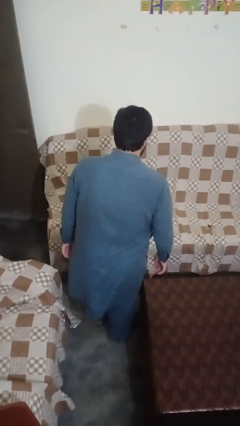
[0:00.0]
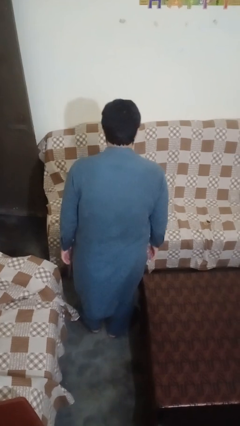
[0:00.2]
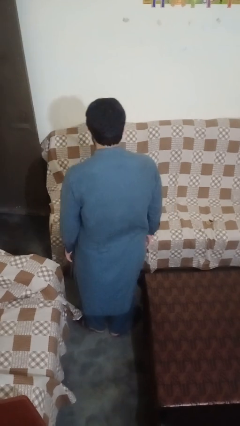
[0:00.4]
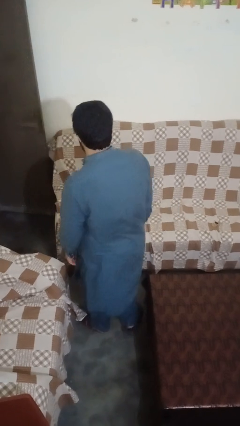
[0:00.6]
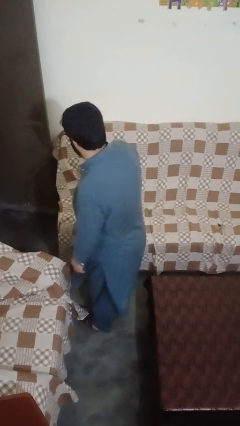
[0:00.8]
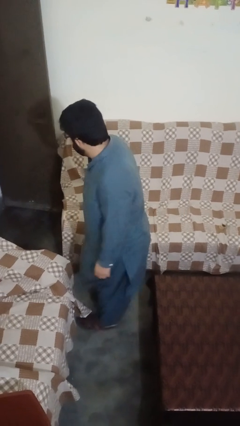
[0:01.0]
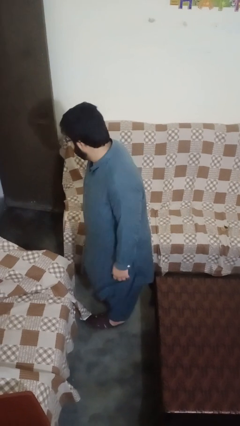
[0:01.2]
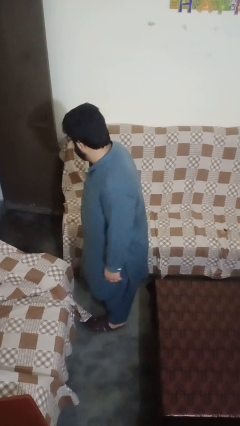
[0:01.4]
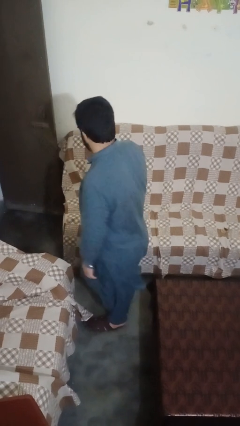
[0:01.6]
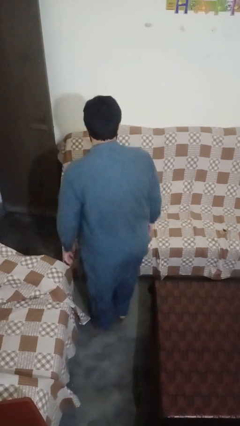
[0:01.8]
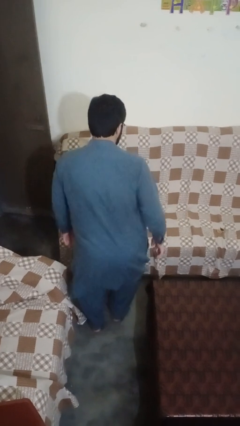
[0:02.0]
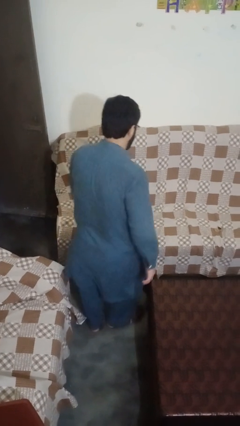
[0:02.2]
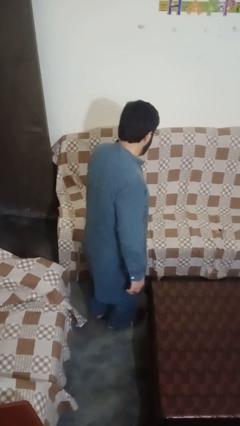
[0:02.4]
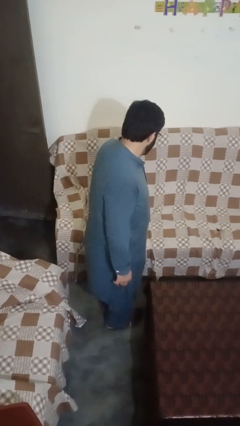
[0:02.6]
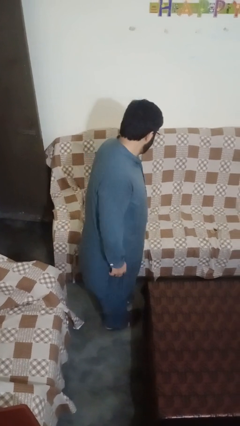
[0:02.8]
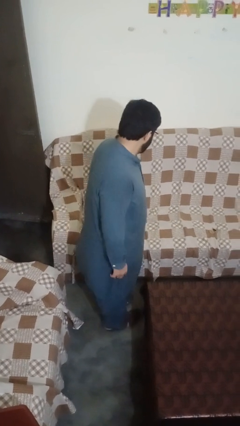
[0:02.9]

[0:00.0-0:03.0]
person twirls

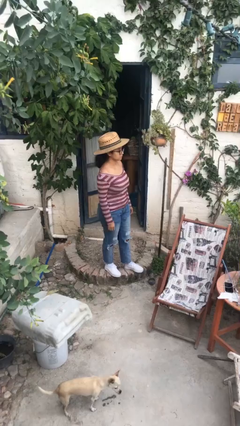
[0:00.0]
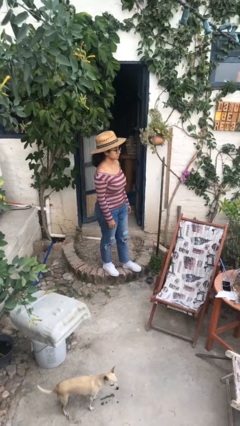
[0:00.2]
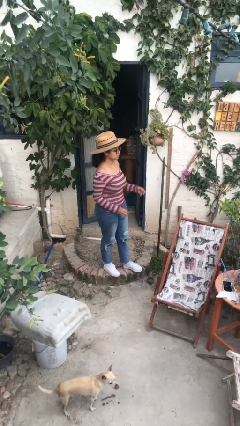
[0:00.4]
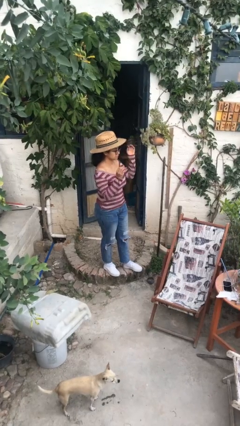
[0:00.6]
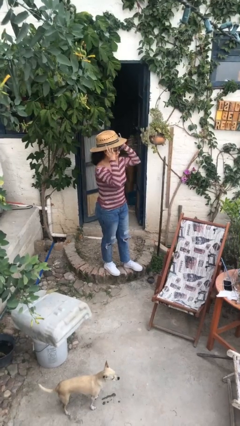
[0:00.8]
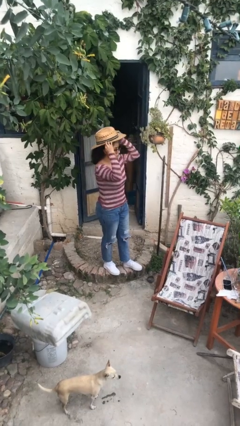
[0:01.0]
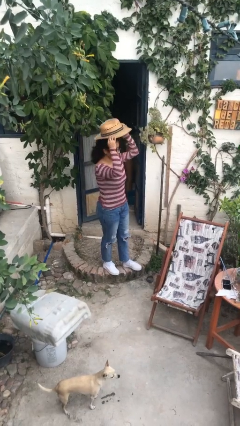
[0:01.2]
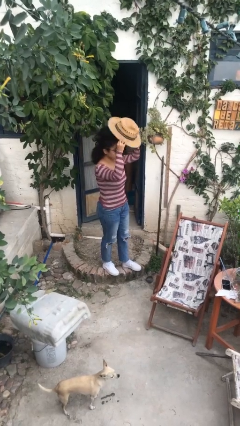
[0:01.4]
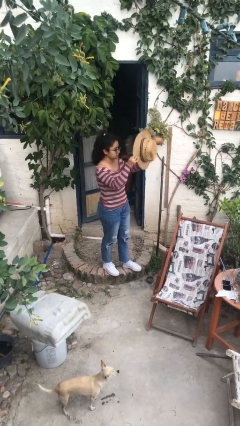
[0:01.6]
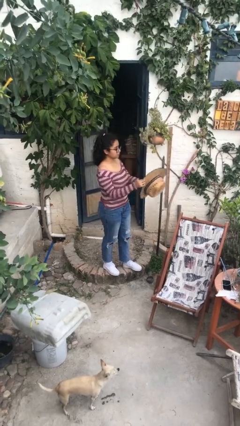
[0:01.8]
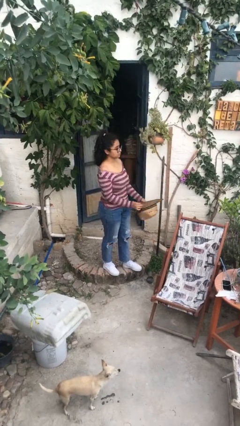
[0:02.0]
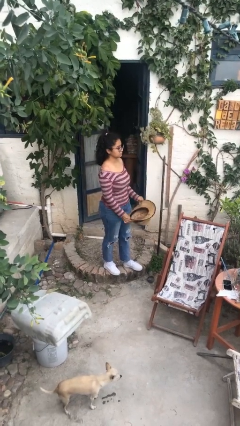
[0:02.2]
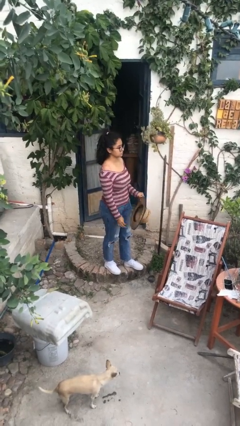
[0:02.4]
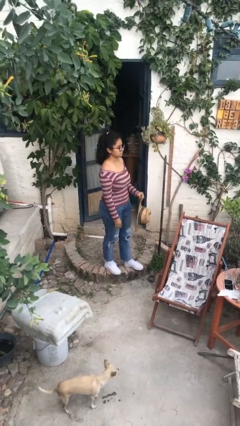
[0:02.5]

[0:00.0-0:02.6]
person takes off hat

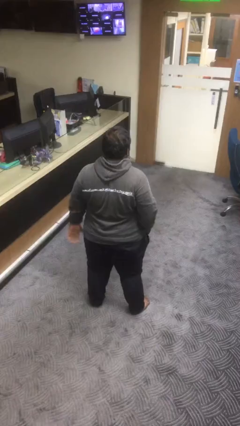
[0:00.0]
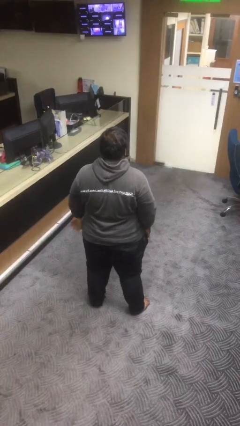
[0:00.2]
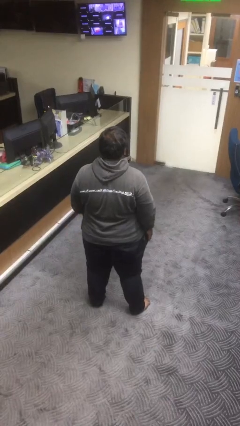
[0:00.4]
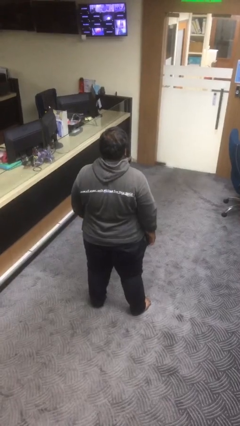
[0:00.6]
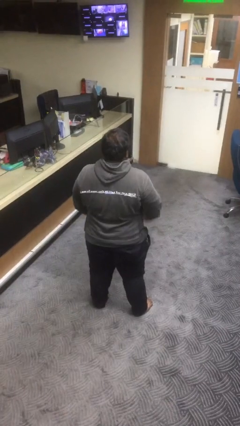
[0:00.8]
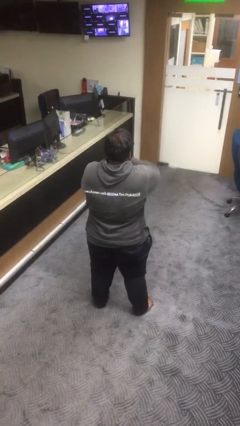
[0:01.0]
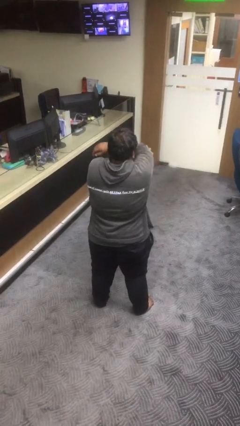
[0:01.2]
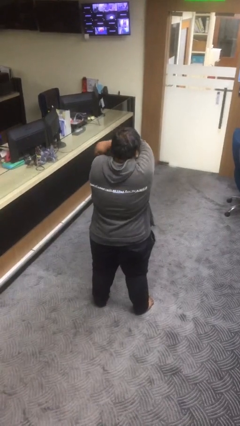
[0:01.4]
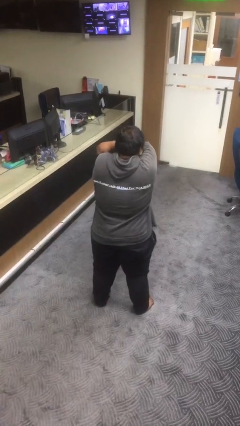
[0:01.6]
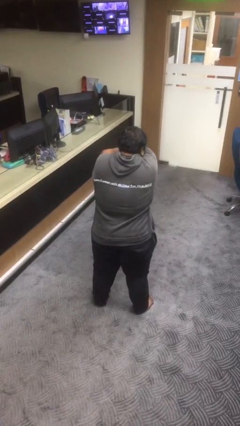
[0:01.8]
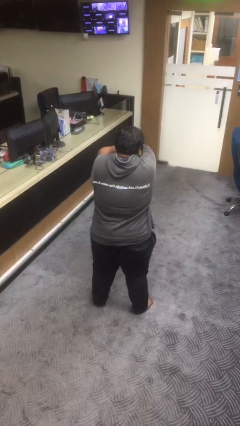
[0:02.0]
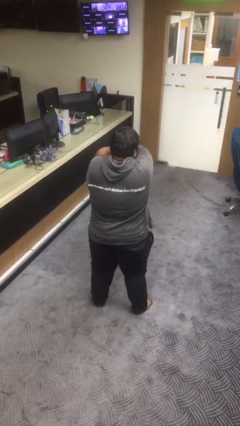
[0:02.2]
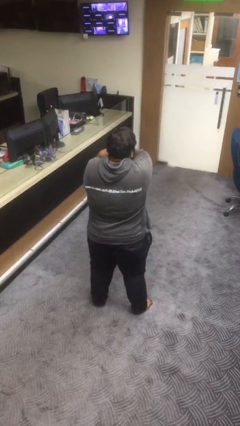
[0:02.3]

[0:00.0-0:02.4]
person sneezes into arm

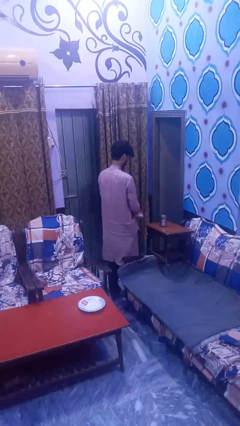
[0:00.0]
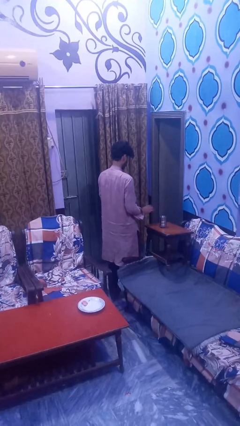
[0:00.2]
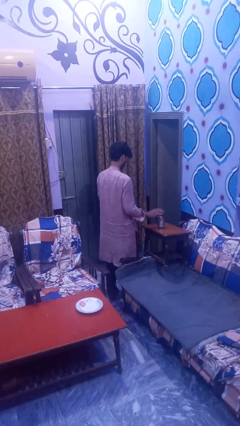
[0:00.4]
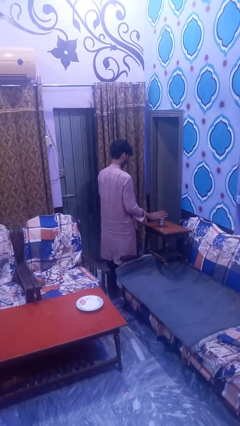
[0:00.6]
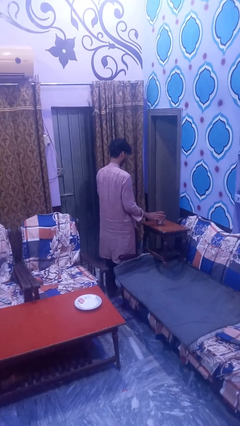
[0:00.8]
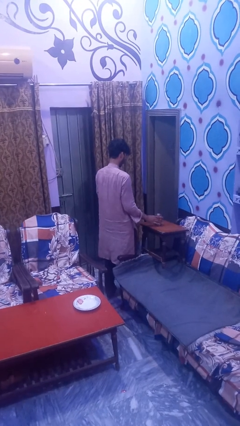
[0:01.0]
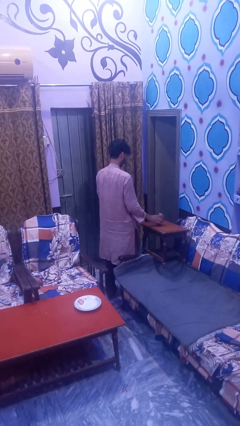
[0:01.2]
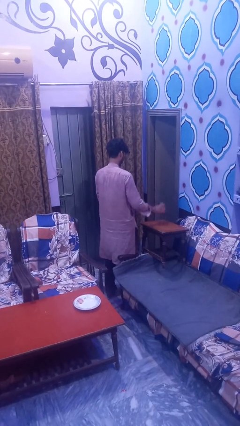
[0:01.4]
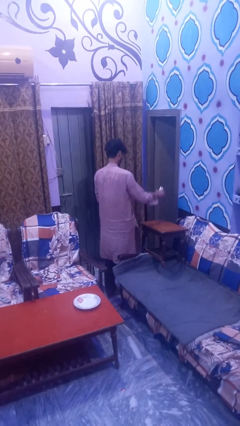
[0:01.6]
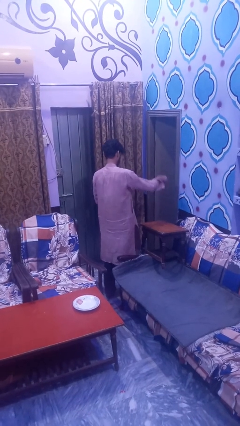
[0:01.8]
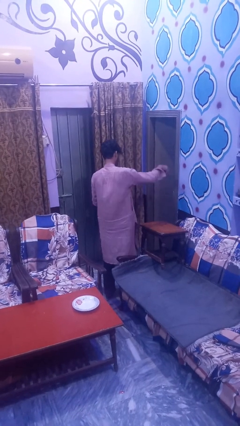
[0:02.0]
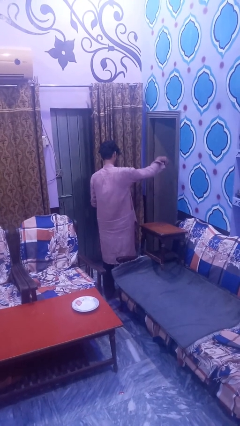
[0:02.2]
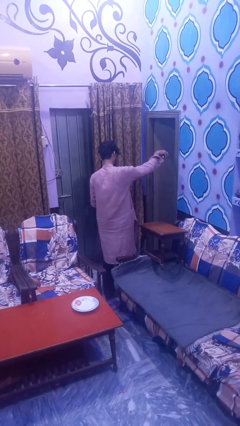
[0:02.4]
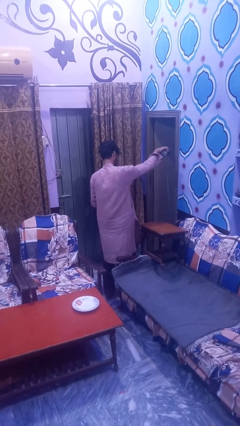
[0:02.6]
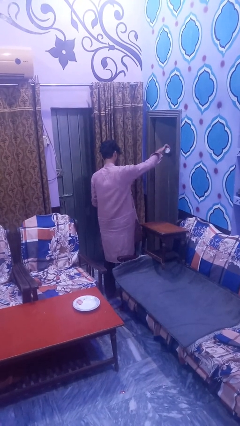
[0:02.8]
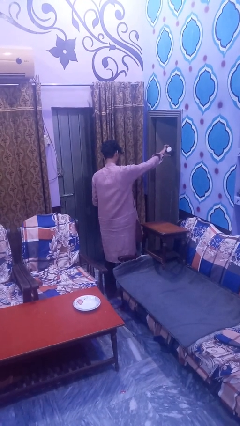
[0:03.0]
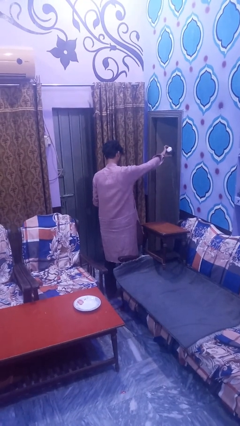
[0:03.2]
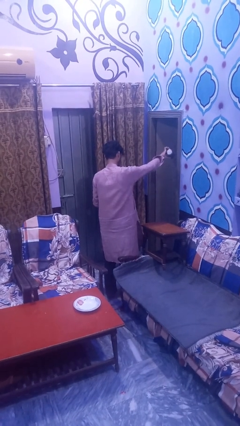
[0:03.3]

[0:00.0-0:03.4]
person spills on floor

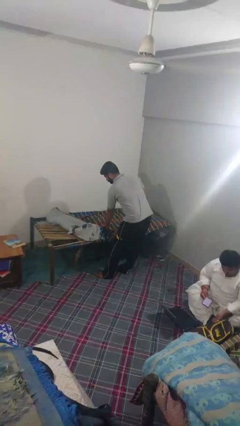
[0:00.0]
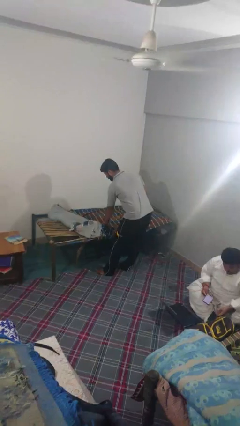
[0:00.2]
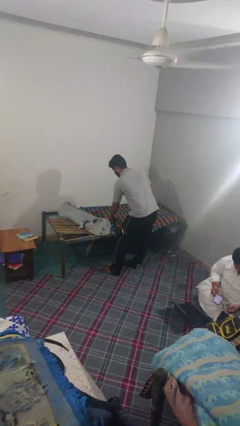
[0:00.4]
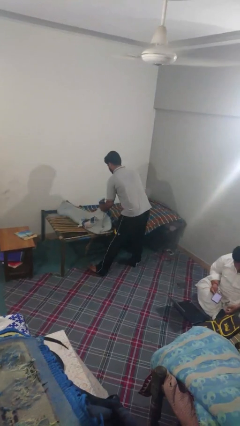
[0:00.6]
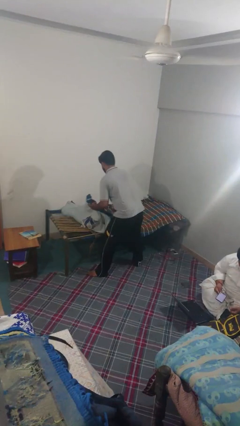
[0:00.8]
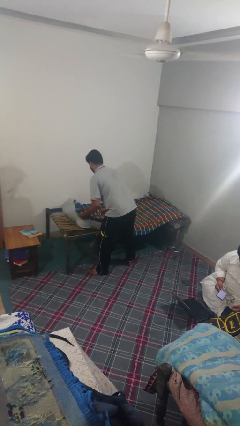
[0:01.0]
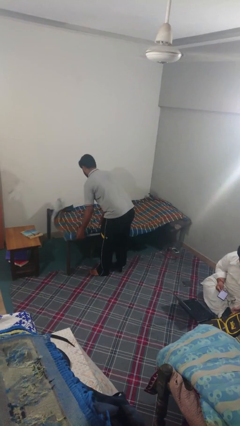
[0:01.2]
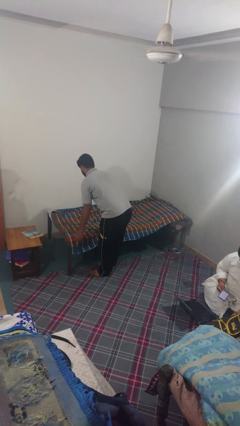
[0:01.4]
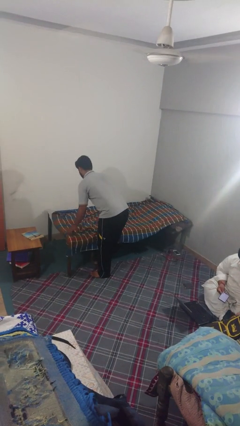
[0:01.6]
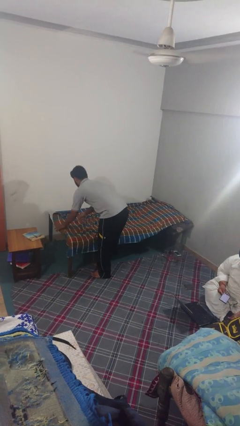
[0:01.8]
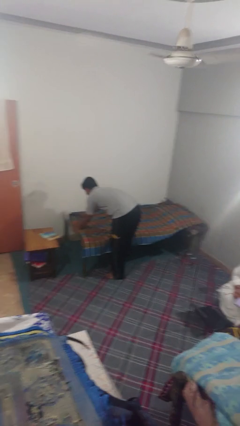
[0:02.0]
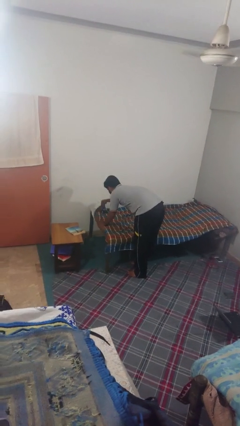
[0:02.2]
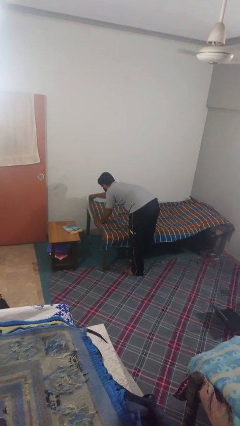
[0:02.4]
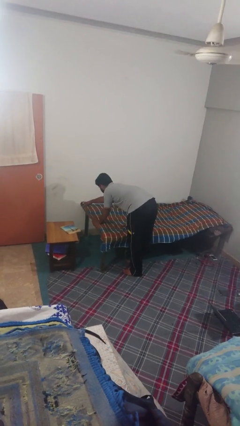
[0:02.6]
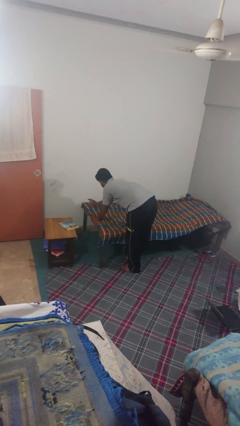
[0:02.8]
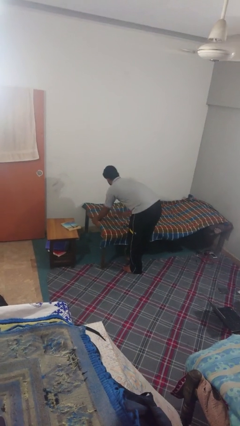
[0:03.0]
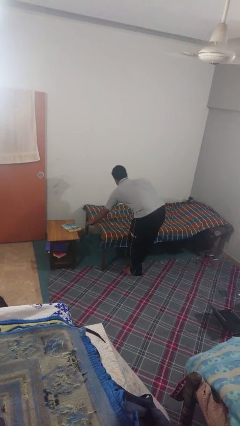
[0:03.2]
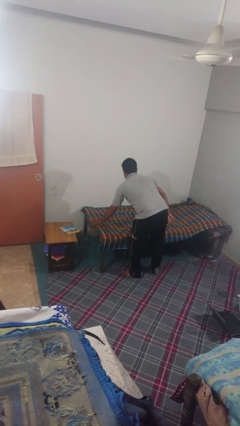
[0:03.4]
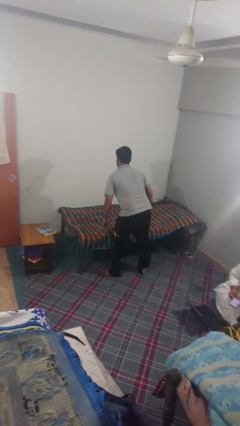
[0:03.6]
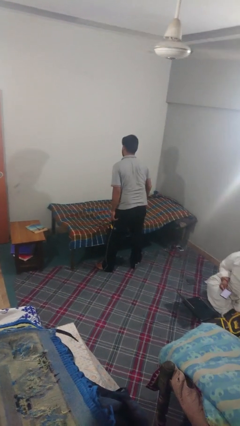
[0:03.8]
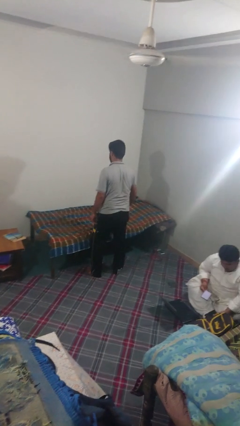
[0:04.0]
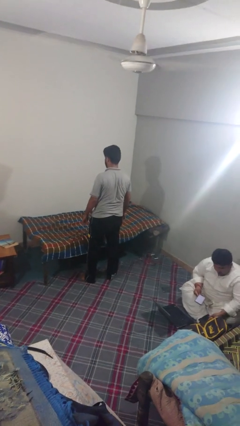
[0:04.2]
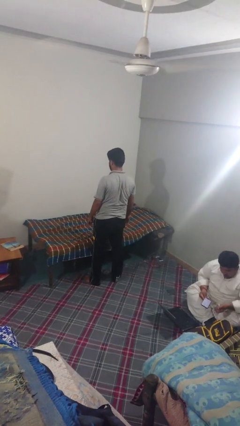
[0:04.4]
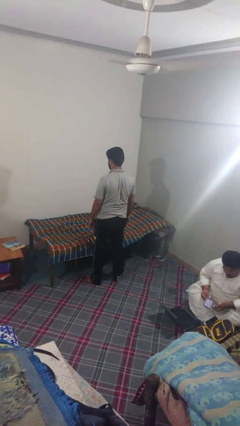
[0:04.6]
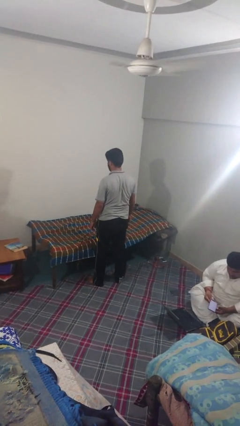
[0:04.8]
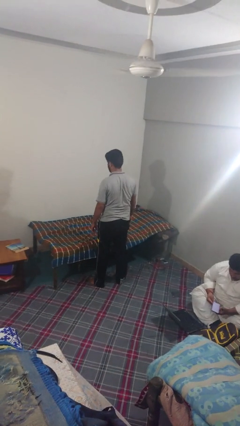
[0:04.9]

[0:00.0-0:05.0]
person makes bed

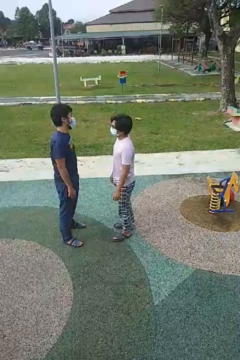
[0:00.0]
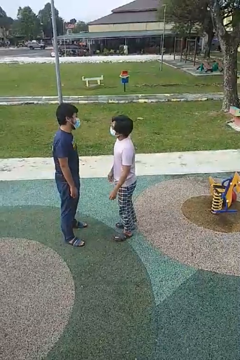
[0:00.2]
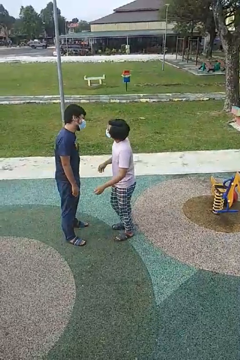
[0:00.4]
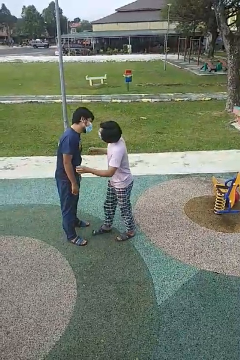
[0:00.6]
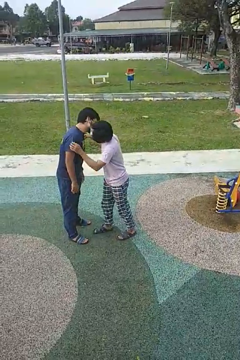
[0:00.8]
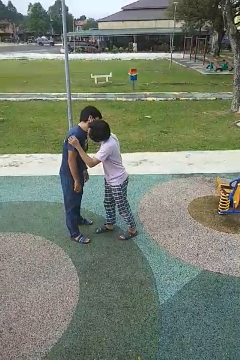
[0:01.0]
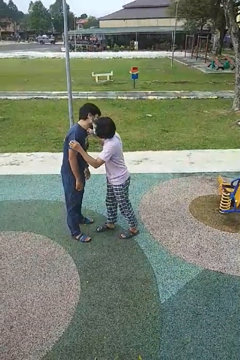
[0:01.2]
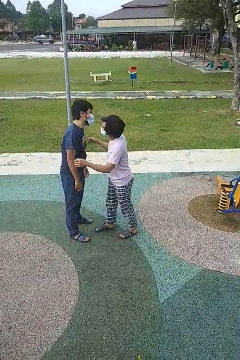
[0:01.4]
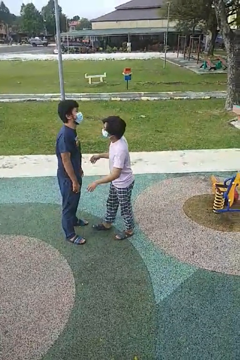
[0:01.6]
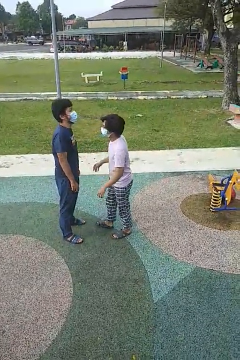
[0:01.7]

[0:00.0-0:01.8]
person kisses cheek of person
